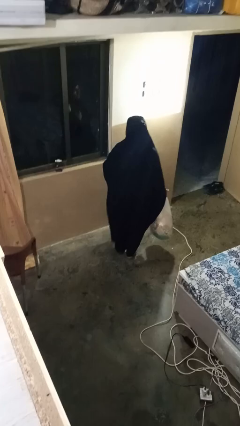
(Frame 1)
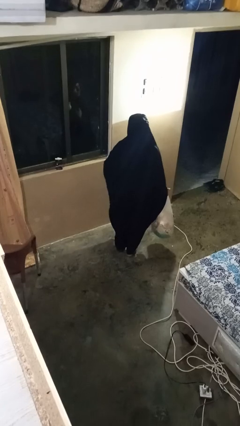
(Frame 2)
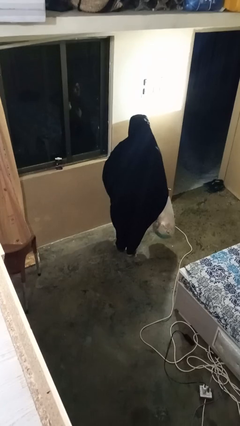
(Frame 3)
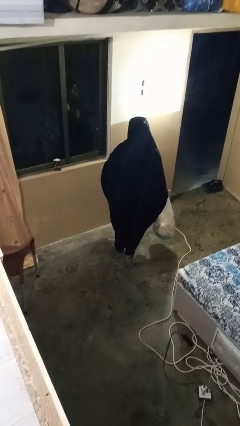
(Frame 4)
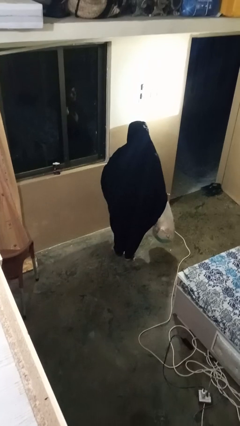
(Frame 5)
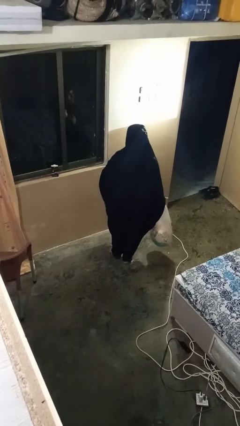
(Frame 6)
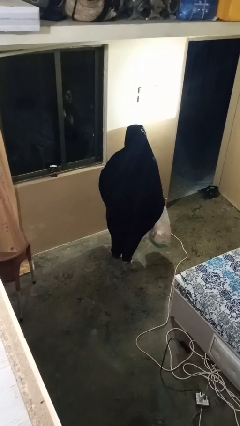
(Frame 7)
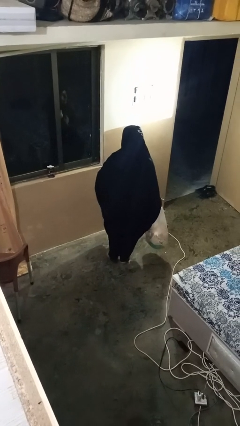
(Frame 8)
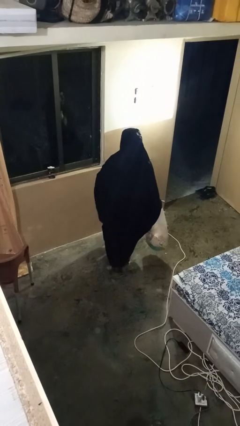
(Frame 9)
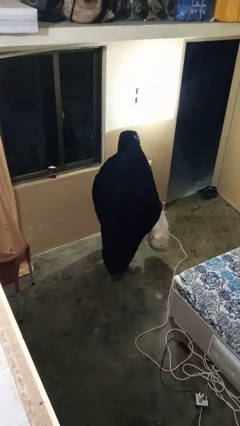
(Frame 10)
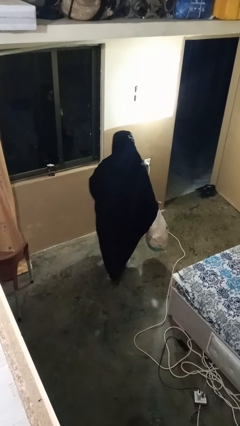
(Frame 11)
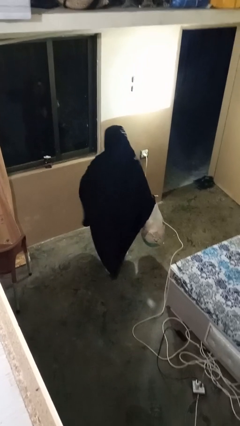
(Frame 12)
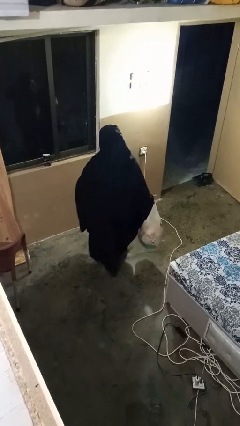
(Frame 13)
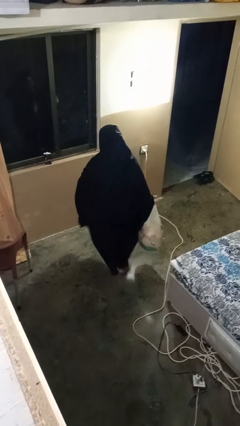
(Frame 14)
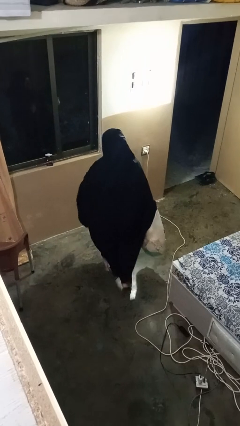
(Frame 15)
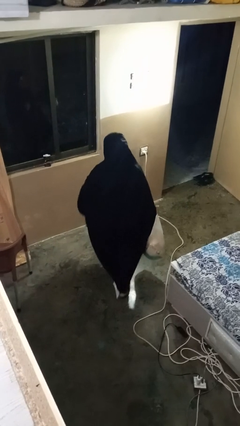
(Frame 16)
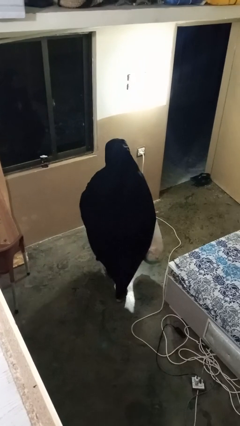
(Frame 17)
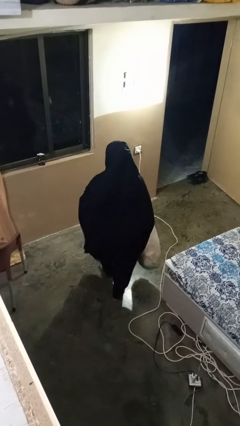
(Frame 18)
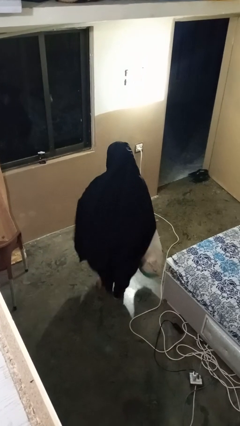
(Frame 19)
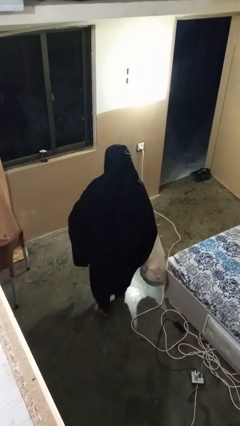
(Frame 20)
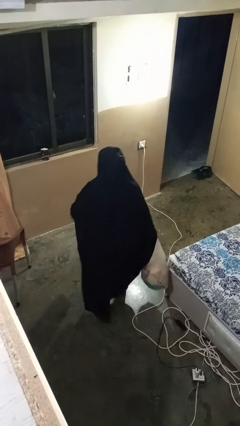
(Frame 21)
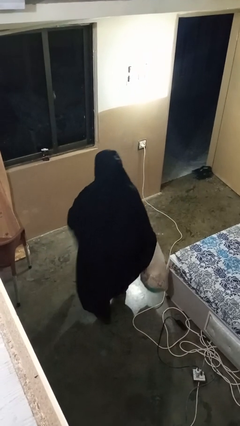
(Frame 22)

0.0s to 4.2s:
person carries groceries

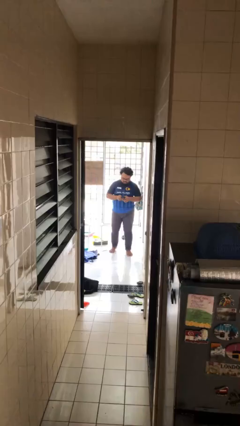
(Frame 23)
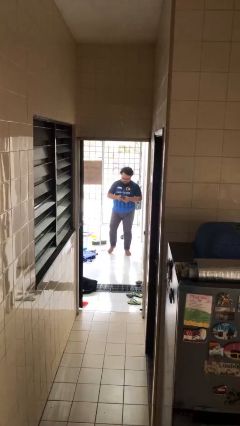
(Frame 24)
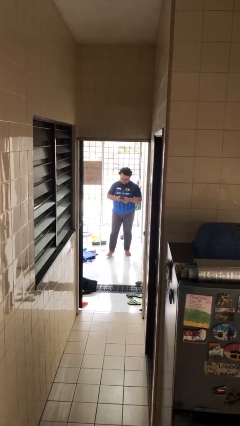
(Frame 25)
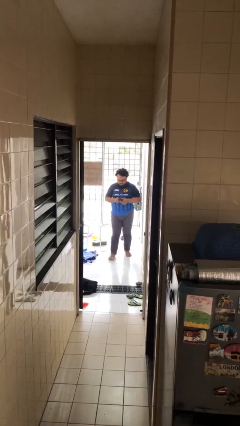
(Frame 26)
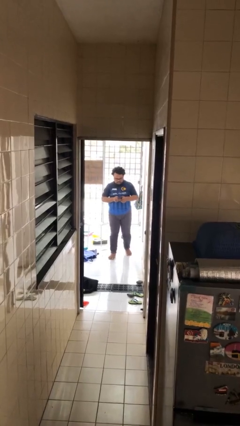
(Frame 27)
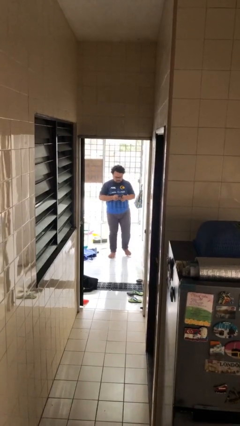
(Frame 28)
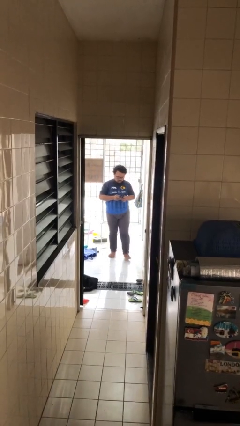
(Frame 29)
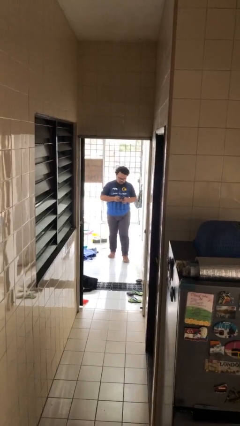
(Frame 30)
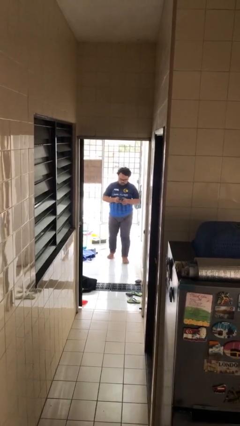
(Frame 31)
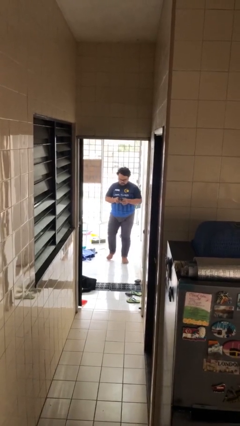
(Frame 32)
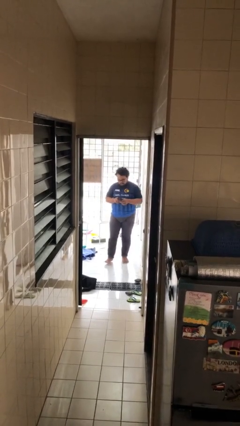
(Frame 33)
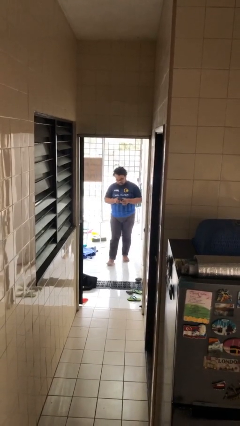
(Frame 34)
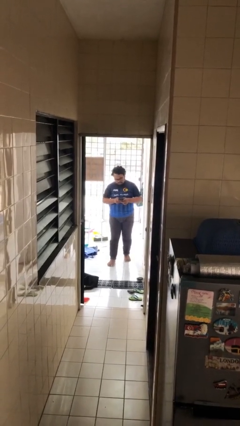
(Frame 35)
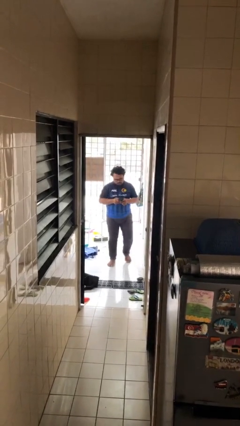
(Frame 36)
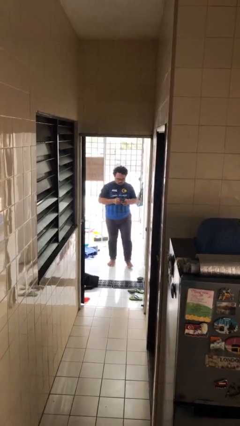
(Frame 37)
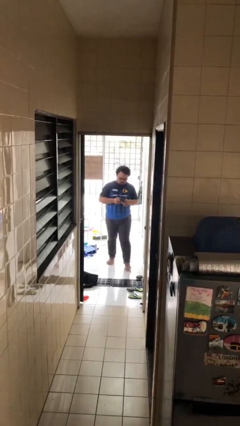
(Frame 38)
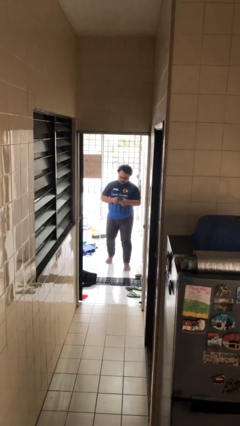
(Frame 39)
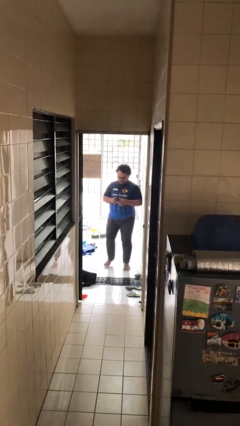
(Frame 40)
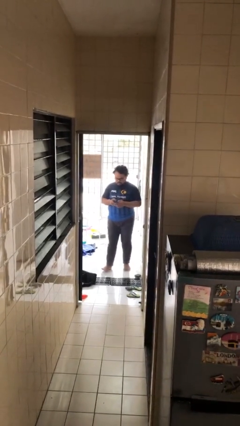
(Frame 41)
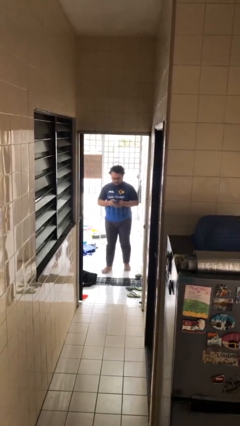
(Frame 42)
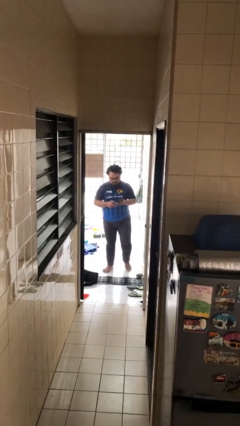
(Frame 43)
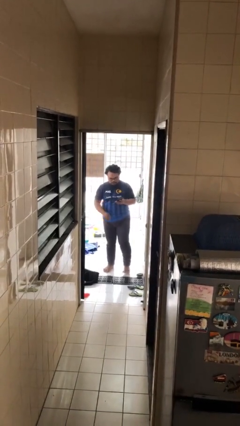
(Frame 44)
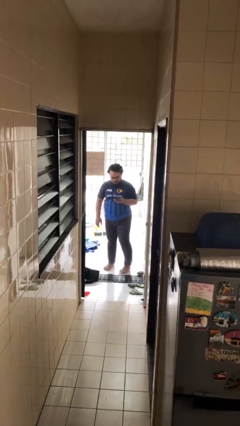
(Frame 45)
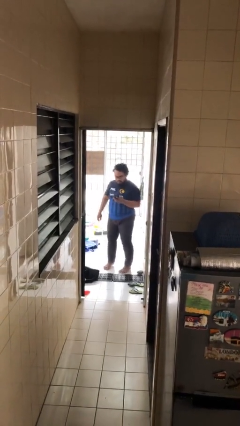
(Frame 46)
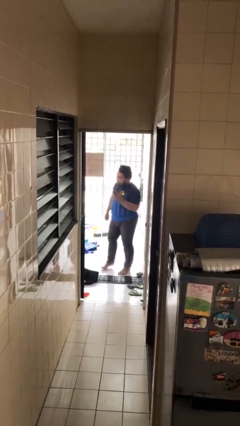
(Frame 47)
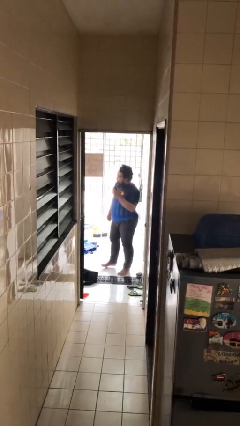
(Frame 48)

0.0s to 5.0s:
person texts on phone

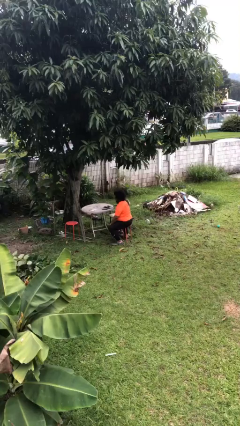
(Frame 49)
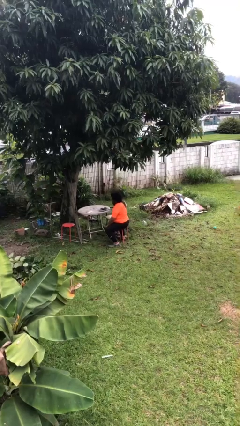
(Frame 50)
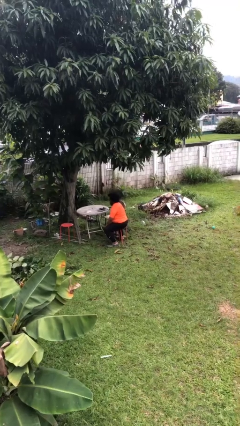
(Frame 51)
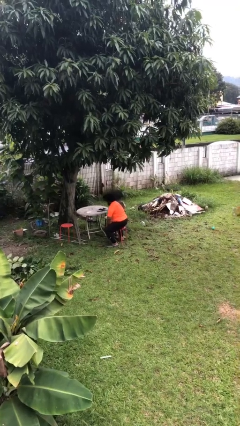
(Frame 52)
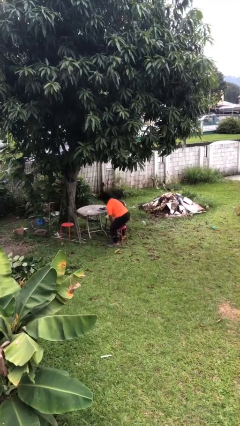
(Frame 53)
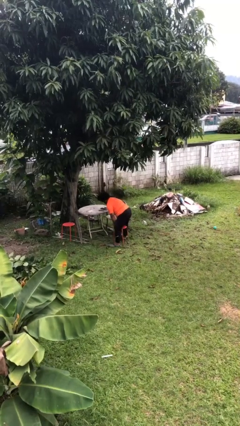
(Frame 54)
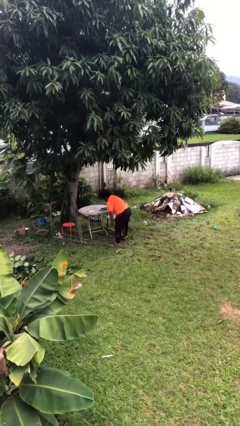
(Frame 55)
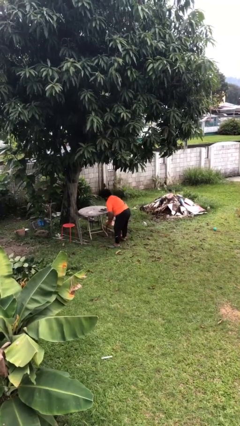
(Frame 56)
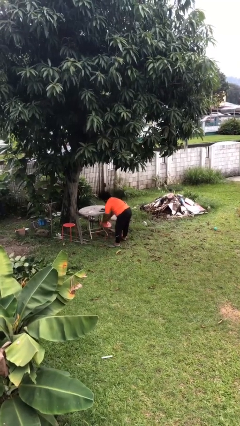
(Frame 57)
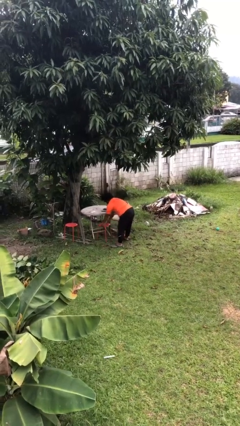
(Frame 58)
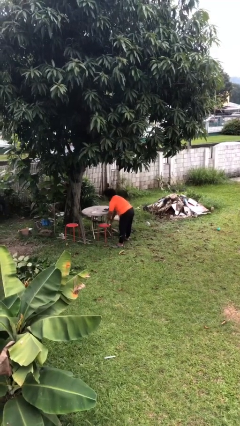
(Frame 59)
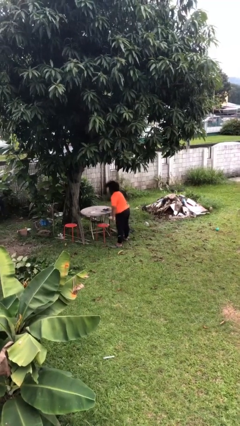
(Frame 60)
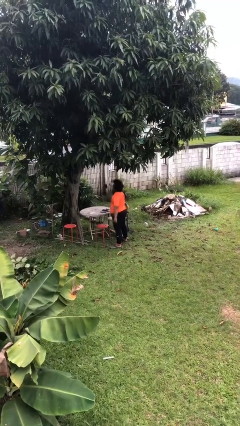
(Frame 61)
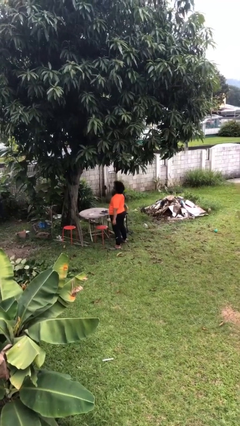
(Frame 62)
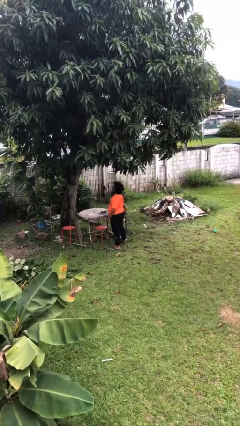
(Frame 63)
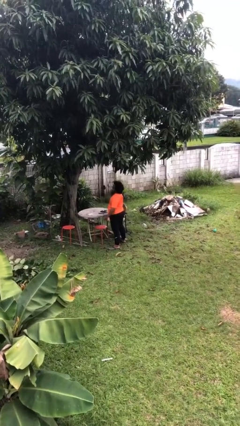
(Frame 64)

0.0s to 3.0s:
person stands up

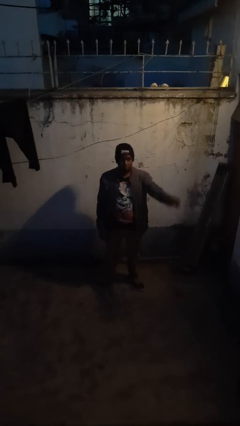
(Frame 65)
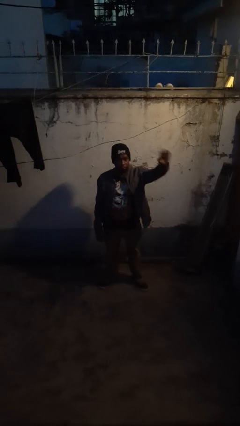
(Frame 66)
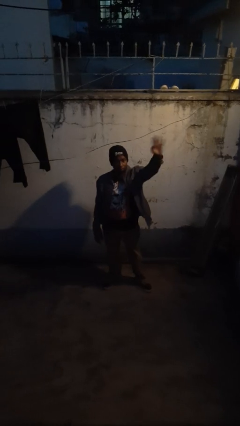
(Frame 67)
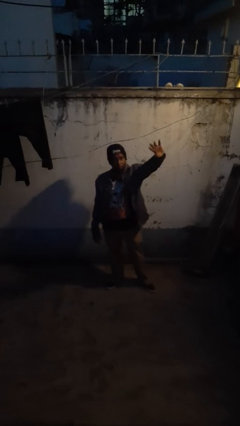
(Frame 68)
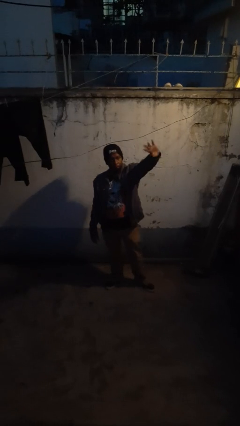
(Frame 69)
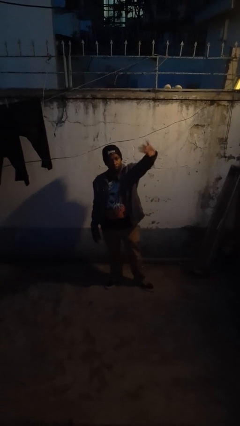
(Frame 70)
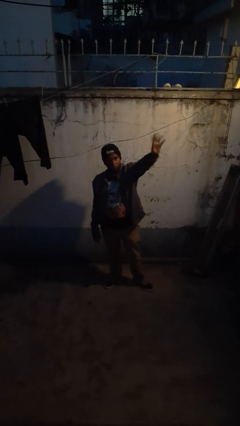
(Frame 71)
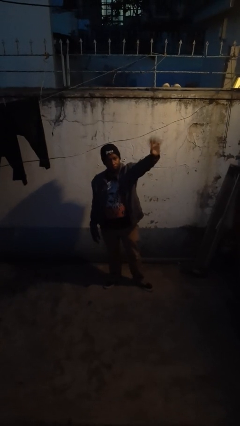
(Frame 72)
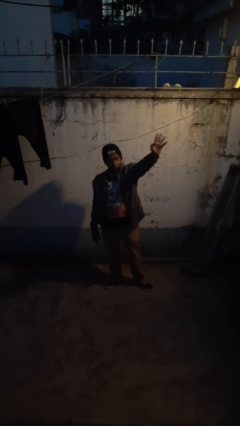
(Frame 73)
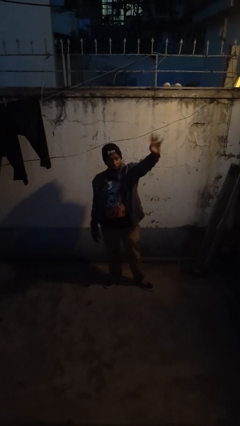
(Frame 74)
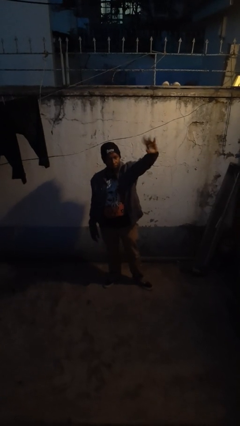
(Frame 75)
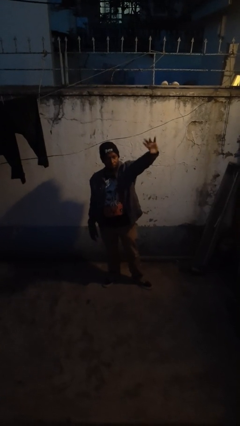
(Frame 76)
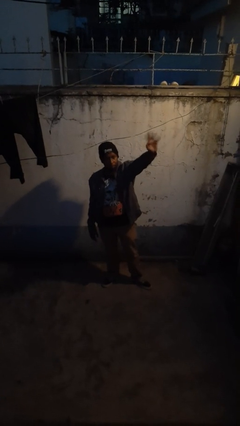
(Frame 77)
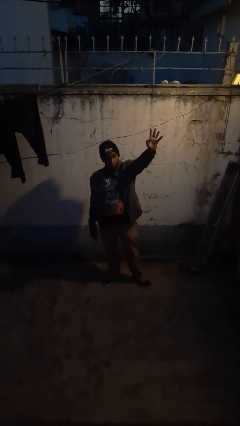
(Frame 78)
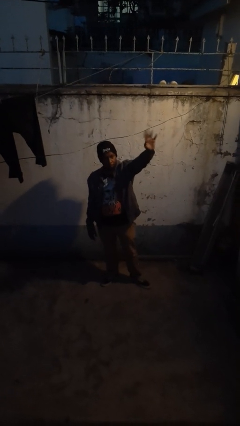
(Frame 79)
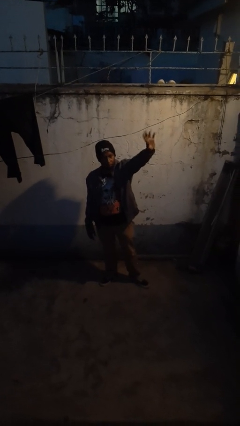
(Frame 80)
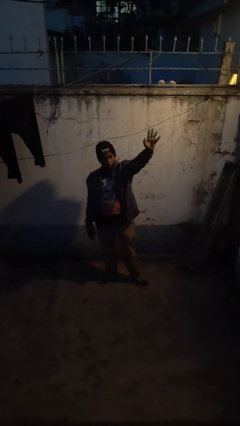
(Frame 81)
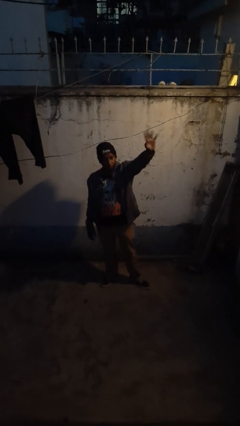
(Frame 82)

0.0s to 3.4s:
person waves at person

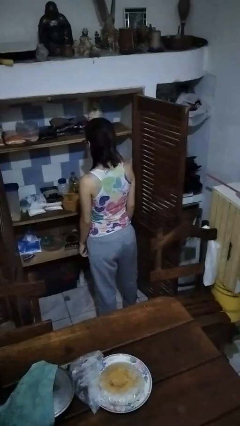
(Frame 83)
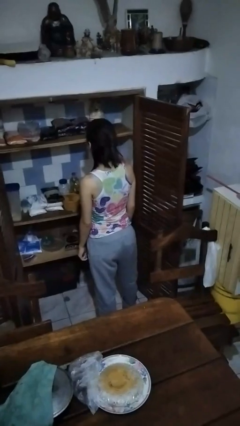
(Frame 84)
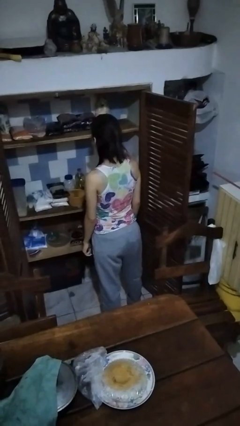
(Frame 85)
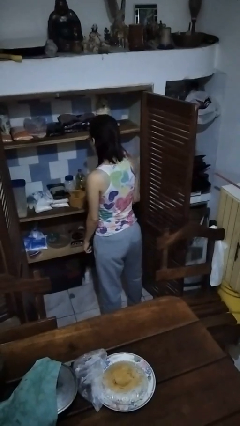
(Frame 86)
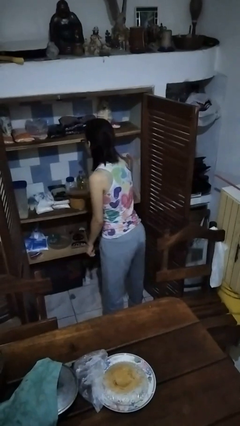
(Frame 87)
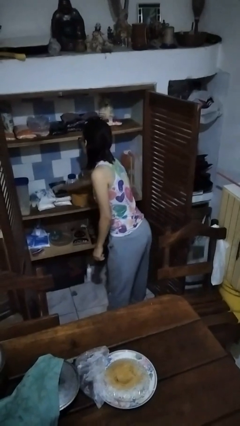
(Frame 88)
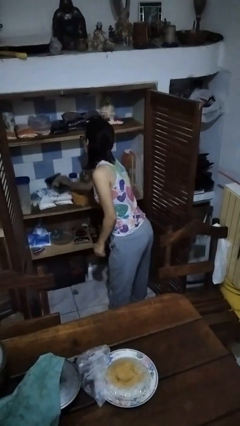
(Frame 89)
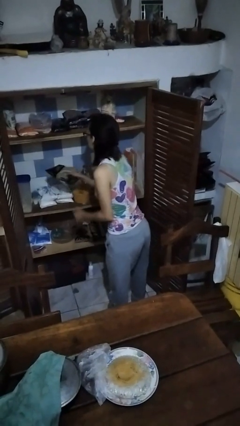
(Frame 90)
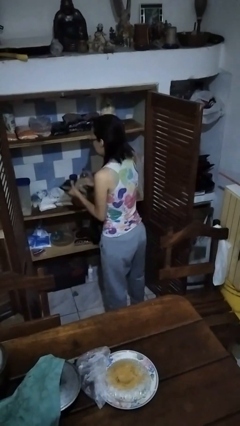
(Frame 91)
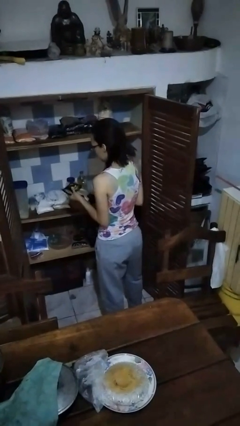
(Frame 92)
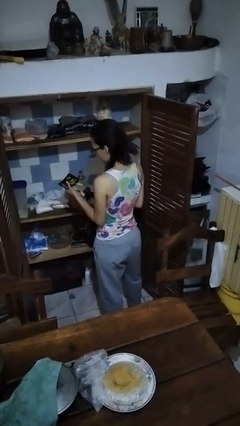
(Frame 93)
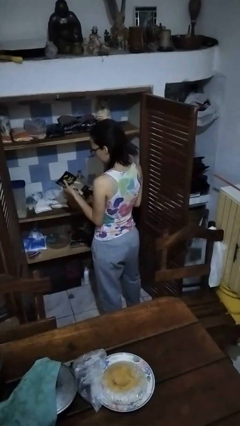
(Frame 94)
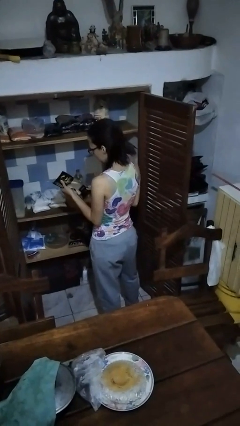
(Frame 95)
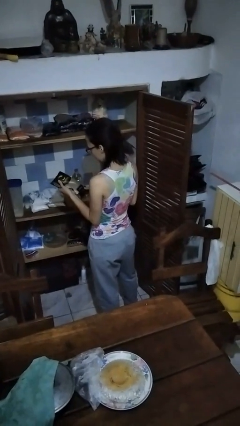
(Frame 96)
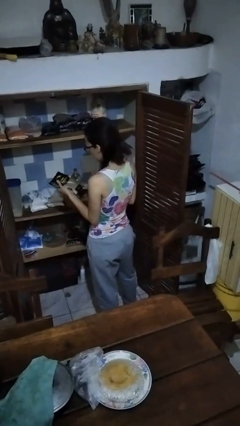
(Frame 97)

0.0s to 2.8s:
person takes object from cabinet
